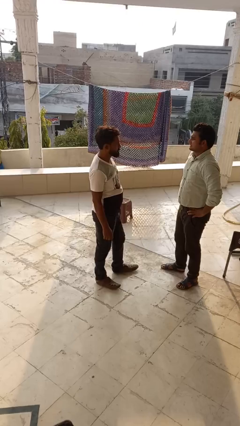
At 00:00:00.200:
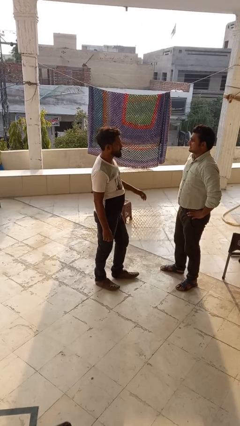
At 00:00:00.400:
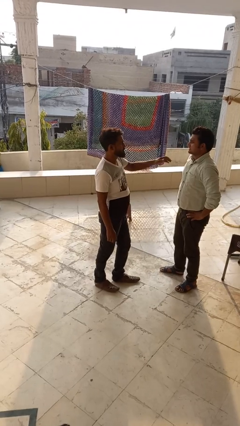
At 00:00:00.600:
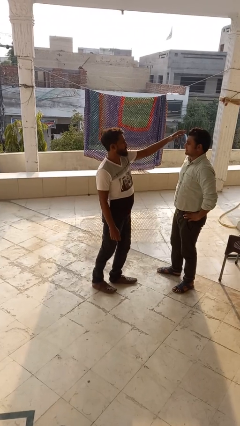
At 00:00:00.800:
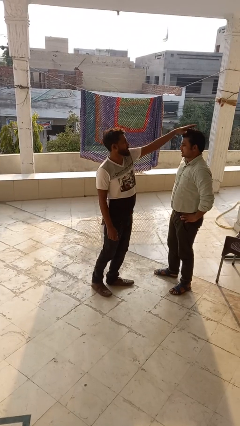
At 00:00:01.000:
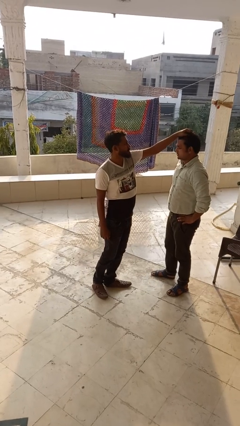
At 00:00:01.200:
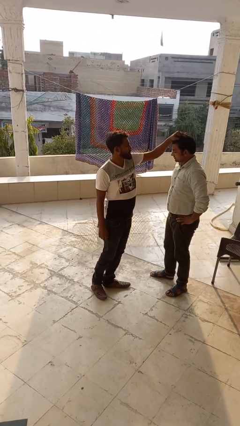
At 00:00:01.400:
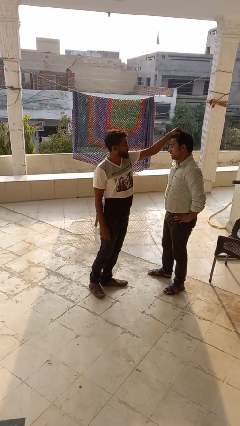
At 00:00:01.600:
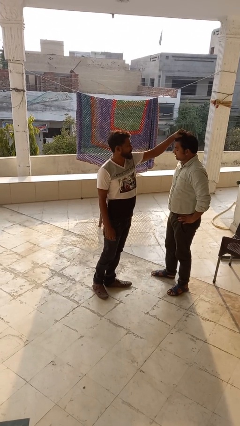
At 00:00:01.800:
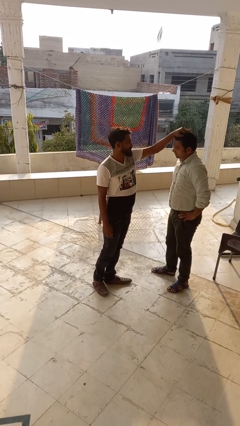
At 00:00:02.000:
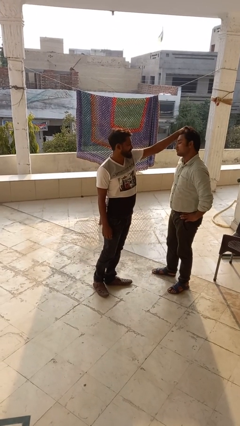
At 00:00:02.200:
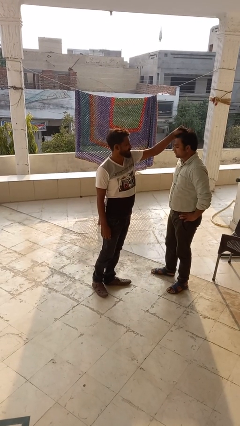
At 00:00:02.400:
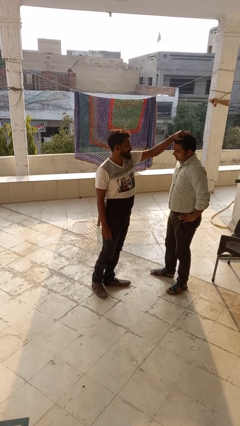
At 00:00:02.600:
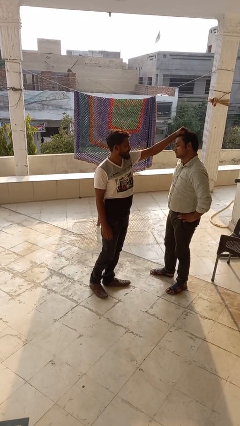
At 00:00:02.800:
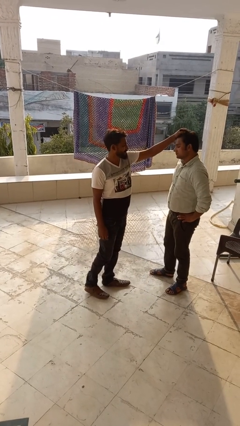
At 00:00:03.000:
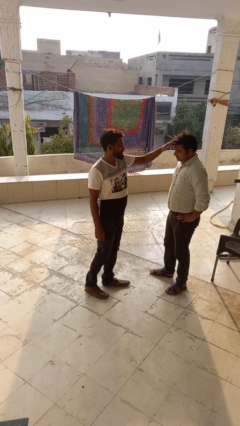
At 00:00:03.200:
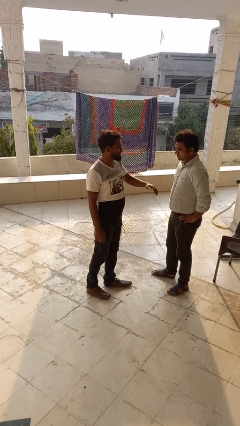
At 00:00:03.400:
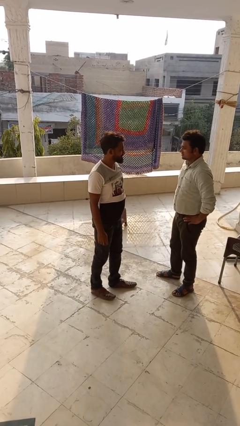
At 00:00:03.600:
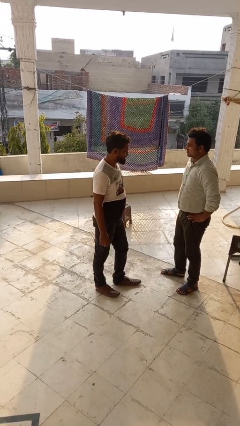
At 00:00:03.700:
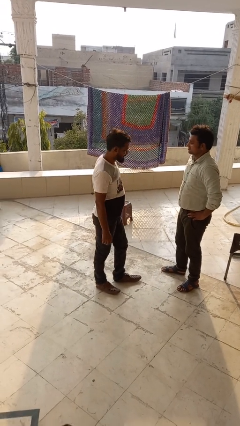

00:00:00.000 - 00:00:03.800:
person grabs person by hair

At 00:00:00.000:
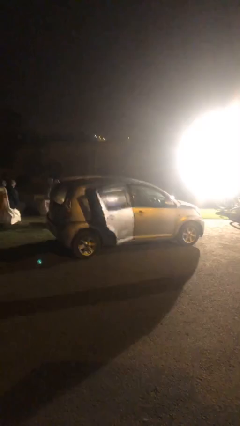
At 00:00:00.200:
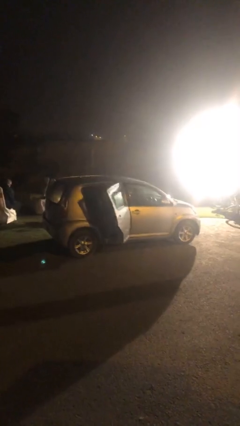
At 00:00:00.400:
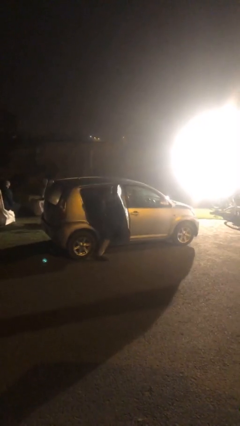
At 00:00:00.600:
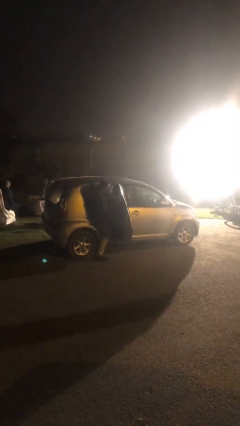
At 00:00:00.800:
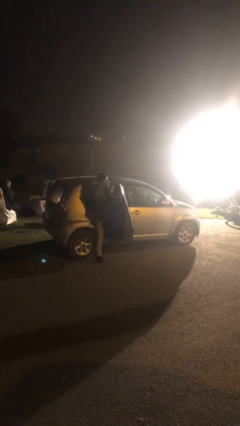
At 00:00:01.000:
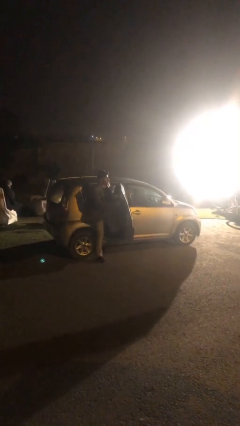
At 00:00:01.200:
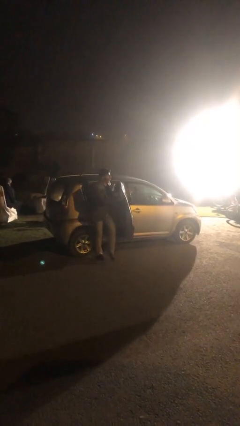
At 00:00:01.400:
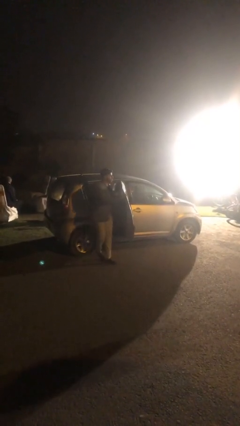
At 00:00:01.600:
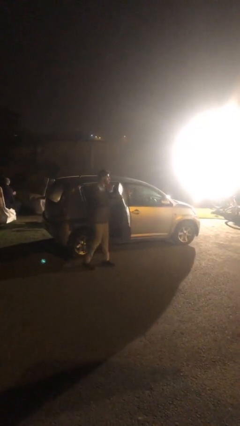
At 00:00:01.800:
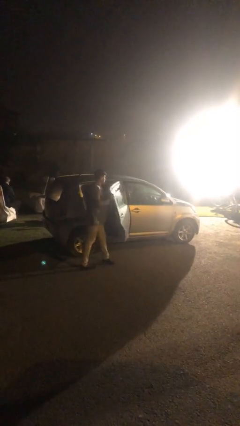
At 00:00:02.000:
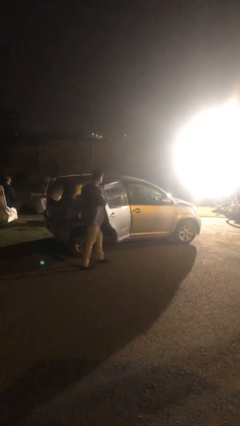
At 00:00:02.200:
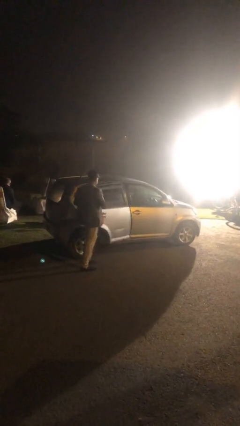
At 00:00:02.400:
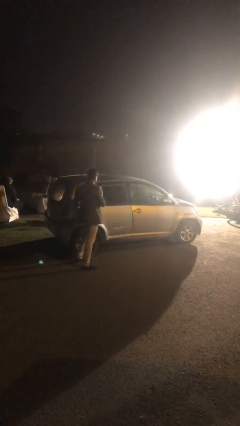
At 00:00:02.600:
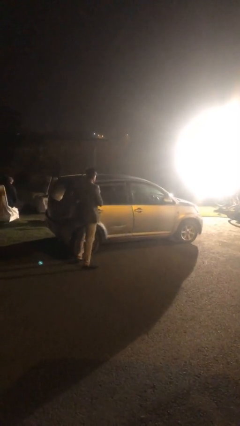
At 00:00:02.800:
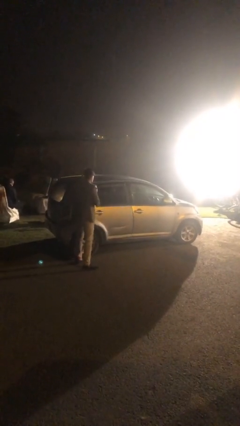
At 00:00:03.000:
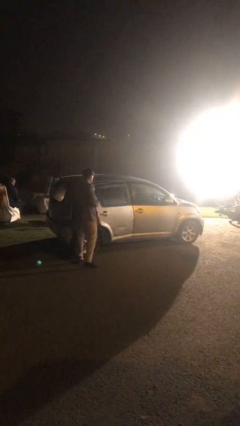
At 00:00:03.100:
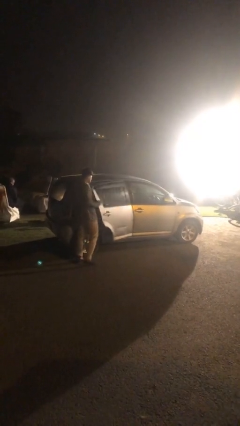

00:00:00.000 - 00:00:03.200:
car drops off person

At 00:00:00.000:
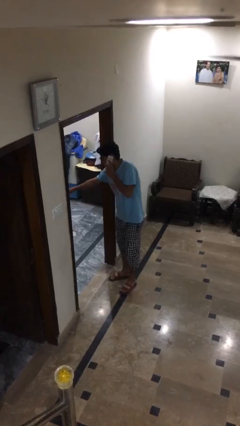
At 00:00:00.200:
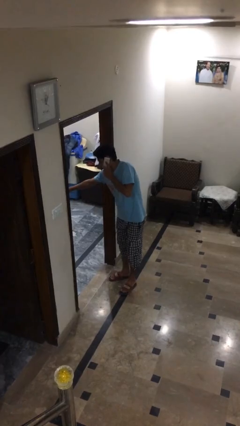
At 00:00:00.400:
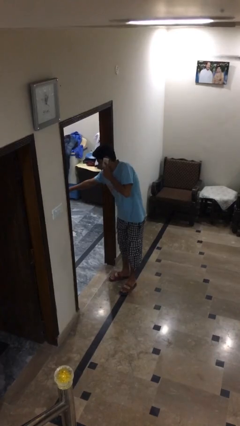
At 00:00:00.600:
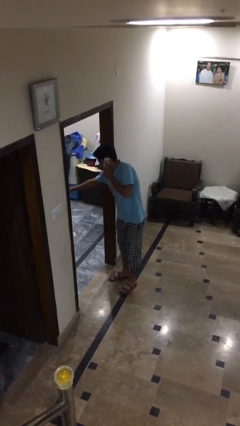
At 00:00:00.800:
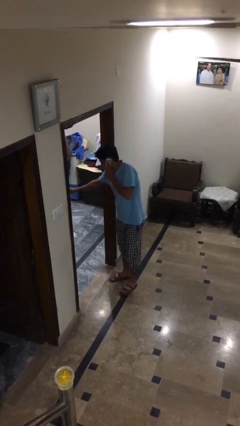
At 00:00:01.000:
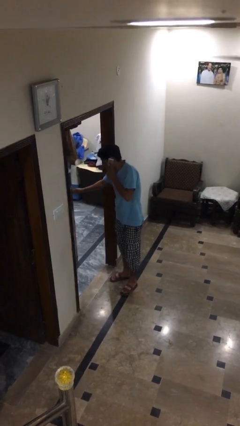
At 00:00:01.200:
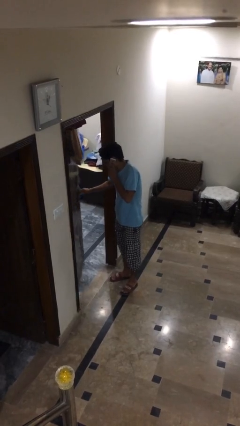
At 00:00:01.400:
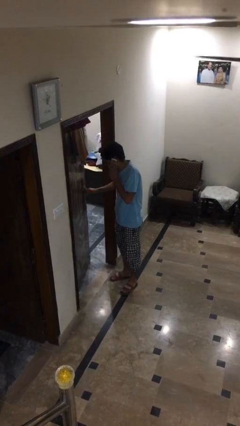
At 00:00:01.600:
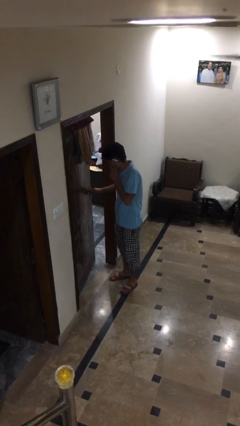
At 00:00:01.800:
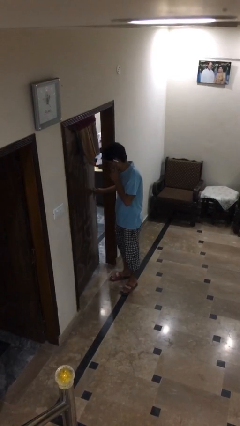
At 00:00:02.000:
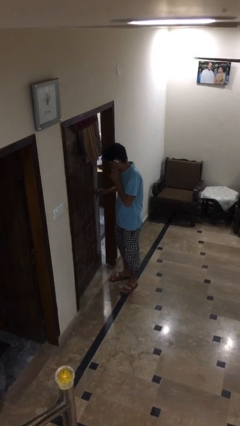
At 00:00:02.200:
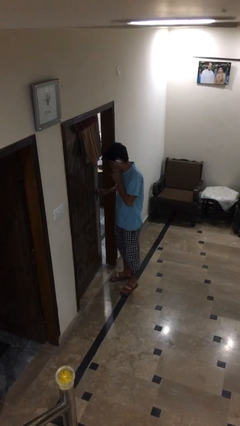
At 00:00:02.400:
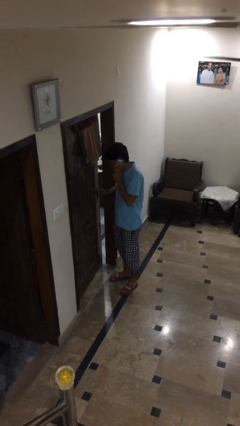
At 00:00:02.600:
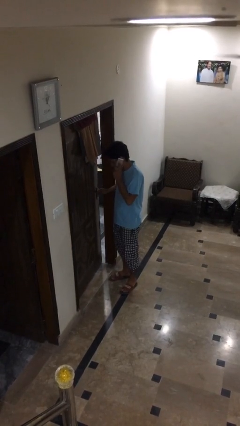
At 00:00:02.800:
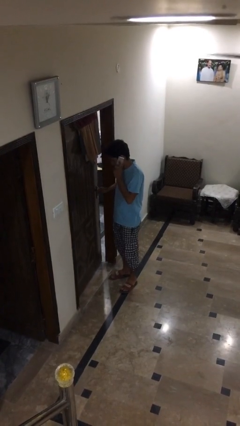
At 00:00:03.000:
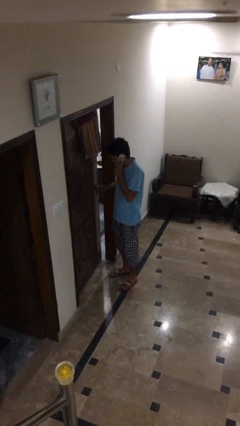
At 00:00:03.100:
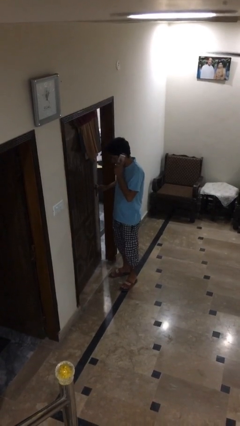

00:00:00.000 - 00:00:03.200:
person closes facility door

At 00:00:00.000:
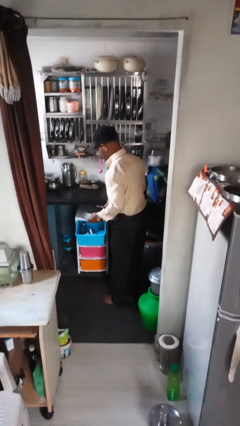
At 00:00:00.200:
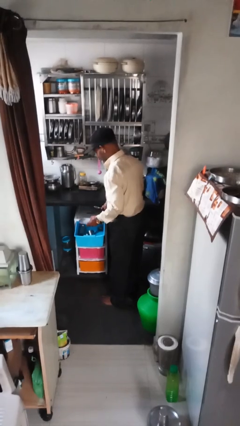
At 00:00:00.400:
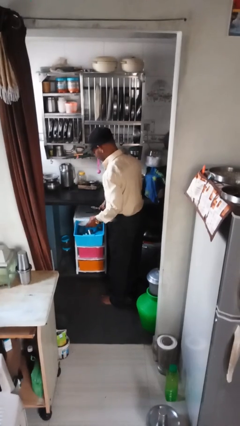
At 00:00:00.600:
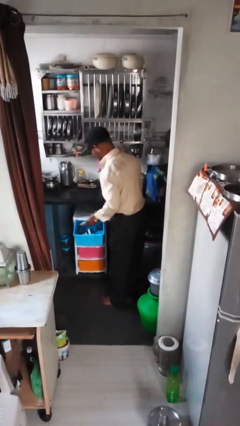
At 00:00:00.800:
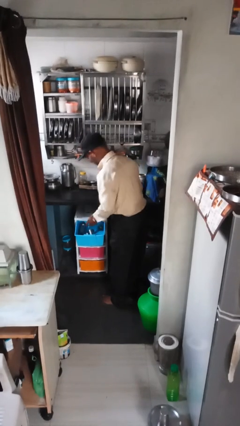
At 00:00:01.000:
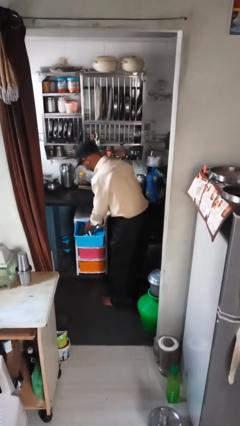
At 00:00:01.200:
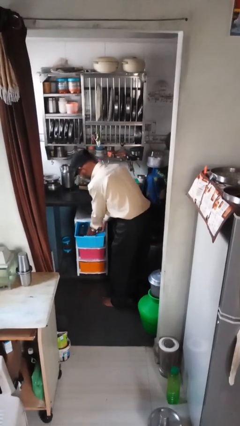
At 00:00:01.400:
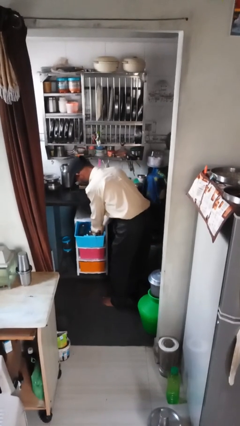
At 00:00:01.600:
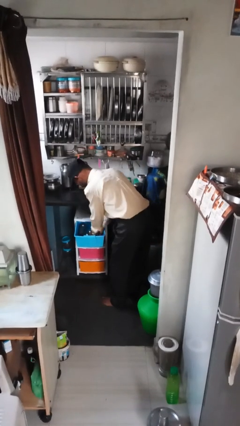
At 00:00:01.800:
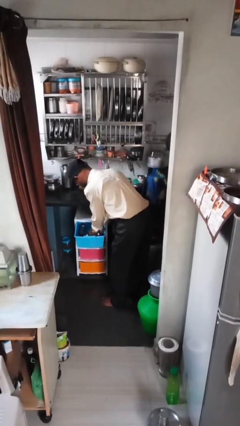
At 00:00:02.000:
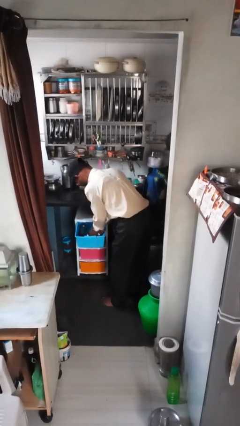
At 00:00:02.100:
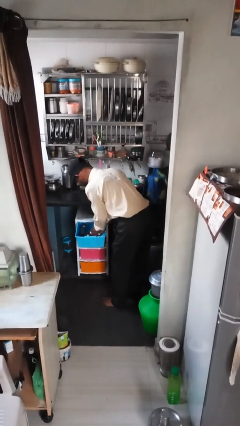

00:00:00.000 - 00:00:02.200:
person puts object into kitchen drawer

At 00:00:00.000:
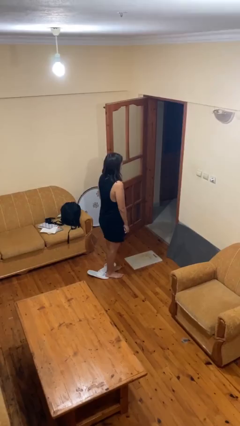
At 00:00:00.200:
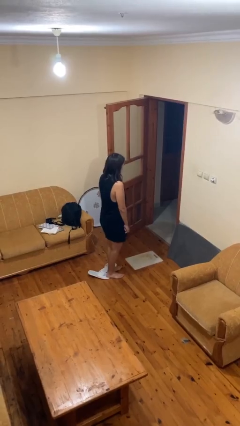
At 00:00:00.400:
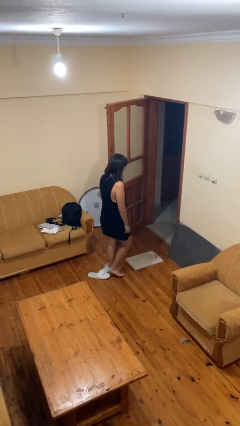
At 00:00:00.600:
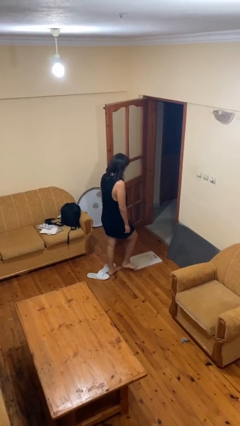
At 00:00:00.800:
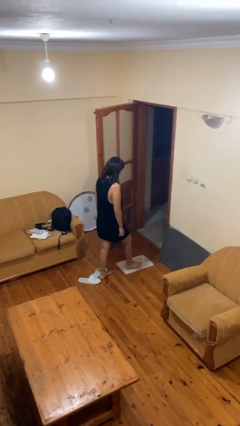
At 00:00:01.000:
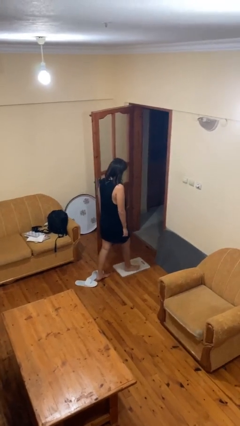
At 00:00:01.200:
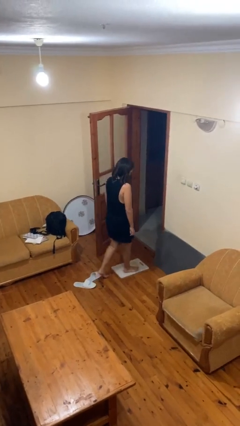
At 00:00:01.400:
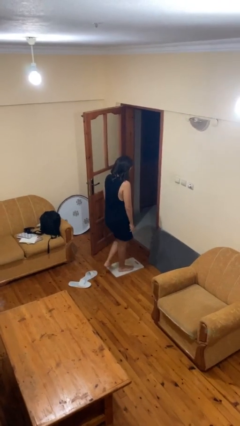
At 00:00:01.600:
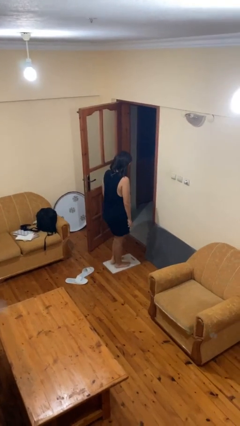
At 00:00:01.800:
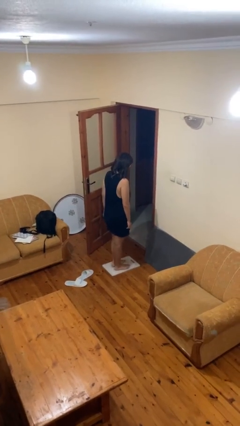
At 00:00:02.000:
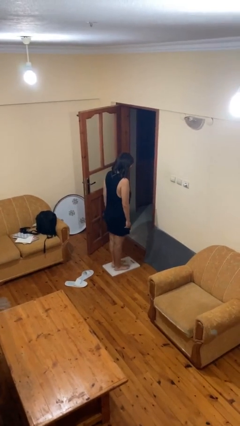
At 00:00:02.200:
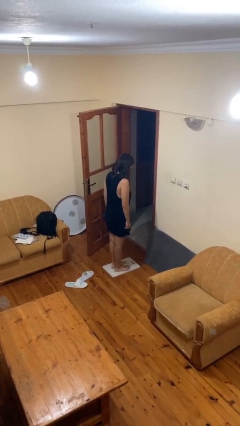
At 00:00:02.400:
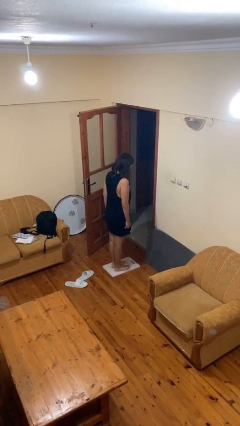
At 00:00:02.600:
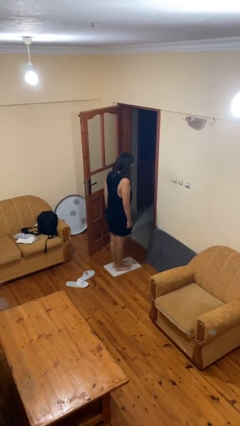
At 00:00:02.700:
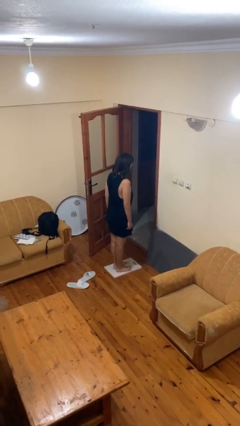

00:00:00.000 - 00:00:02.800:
person uses bodyweight scale

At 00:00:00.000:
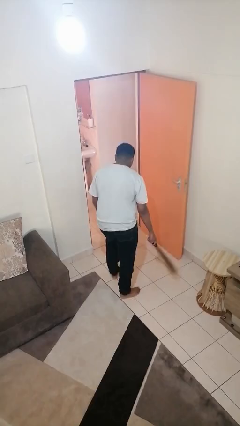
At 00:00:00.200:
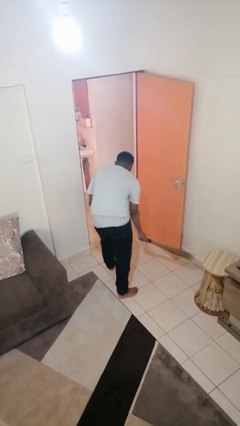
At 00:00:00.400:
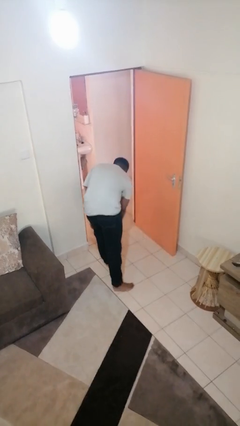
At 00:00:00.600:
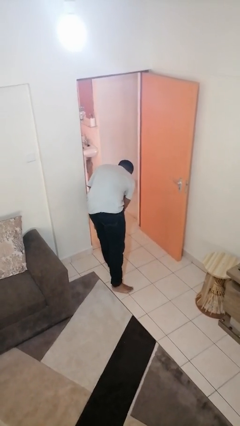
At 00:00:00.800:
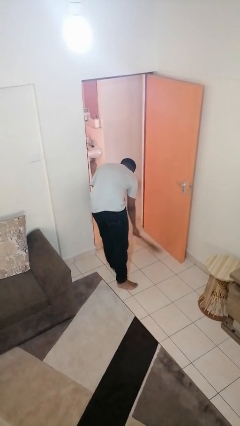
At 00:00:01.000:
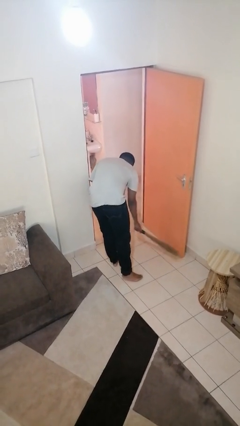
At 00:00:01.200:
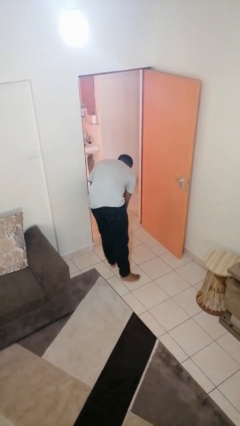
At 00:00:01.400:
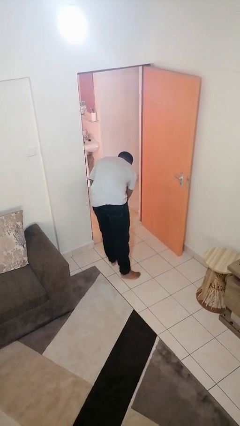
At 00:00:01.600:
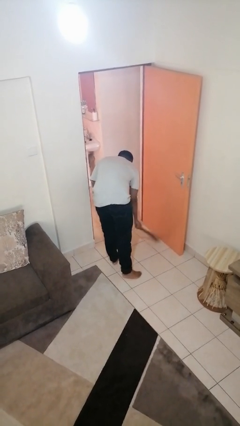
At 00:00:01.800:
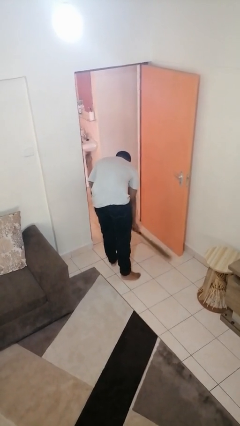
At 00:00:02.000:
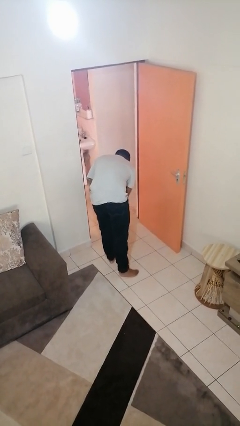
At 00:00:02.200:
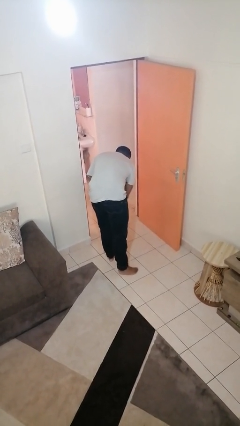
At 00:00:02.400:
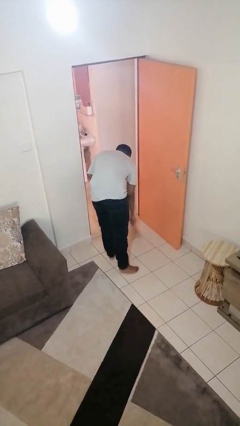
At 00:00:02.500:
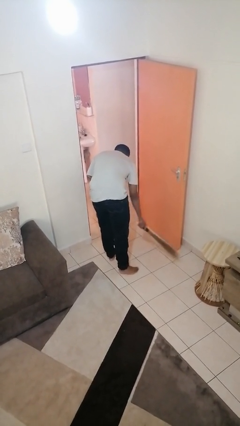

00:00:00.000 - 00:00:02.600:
person sweeps floor
